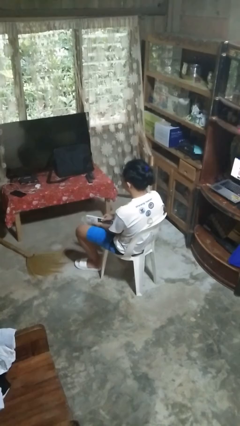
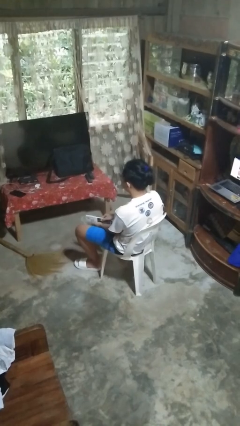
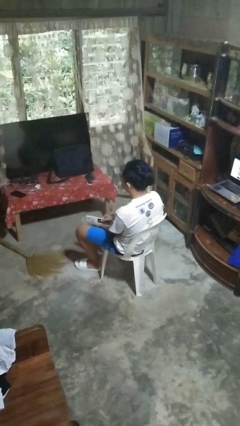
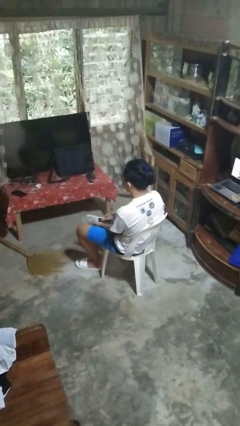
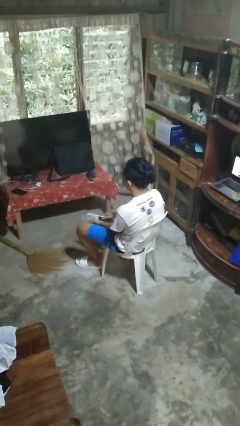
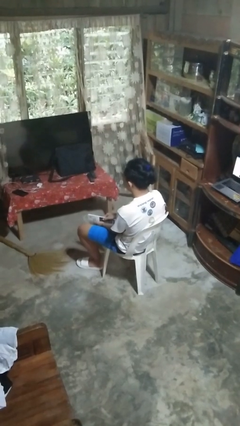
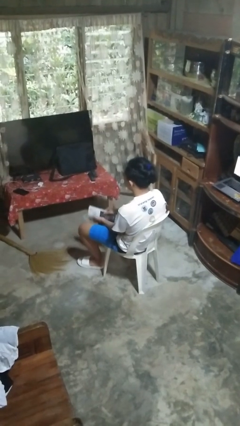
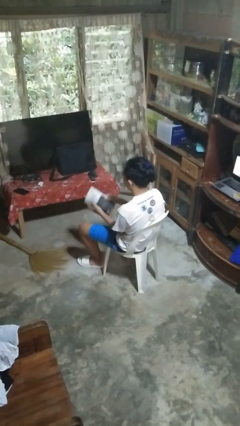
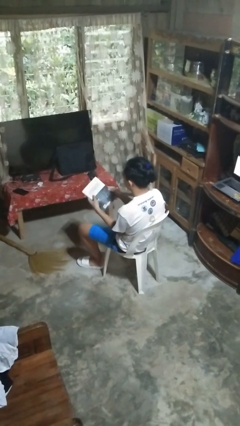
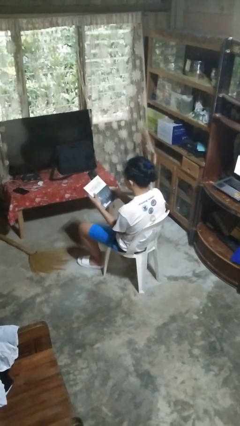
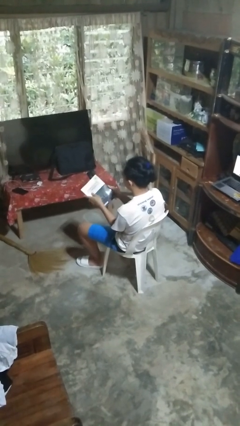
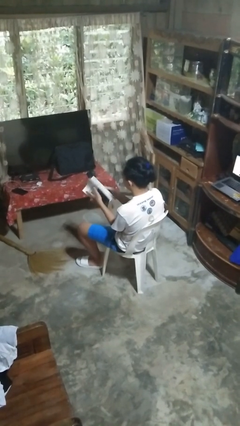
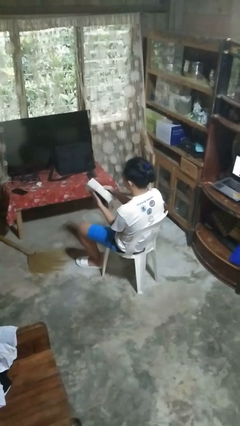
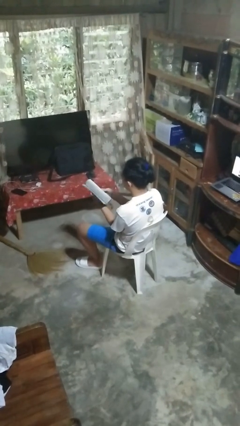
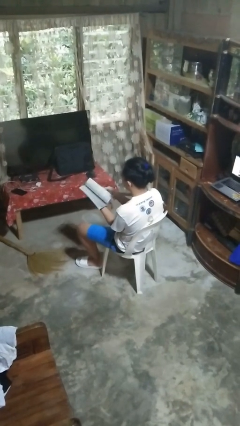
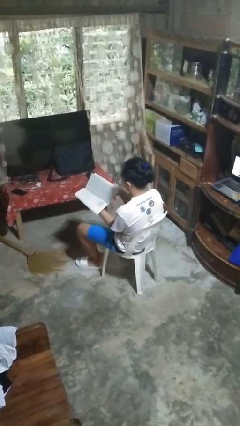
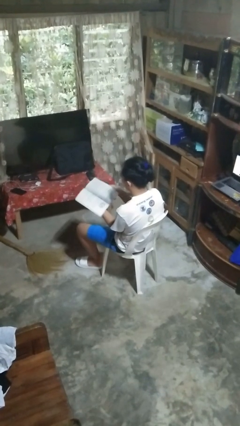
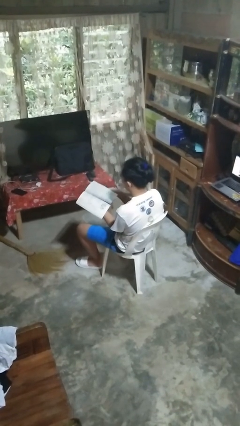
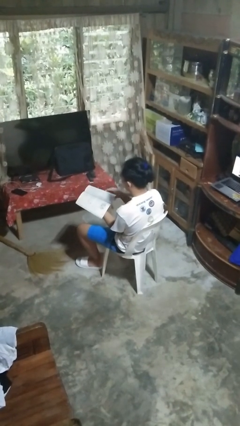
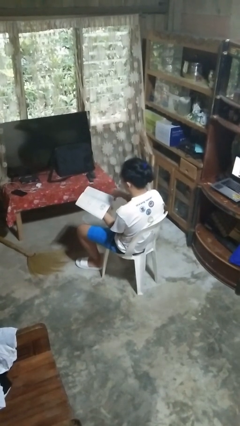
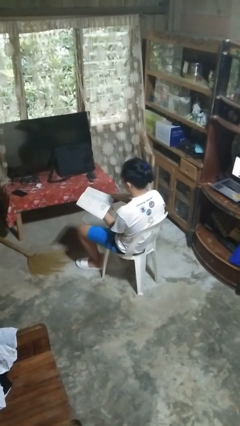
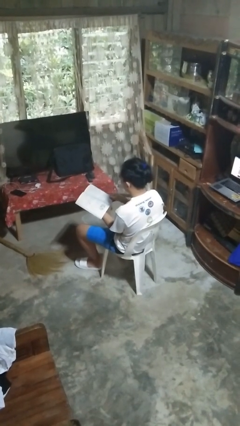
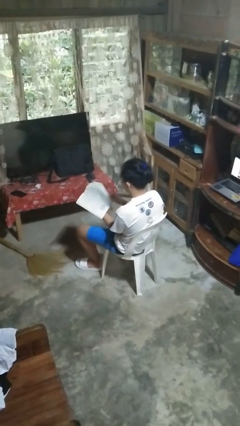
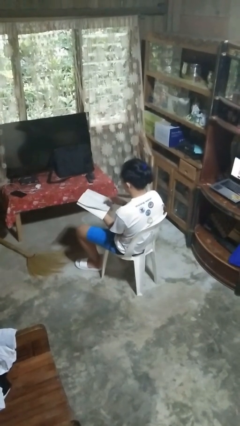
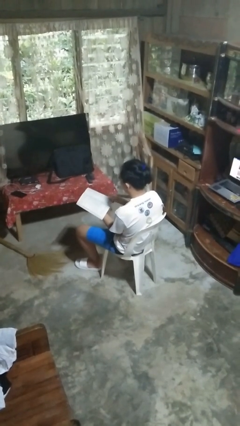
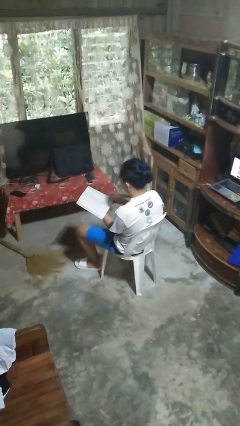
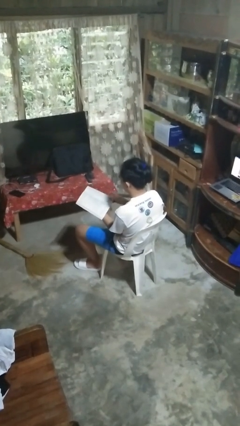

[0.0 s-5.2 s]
person reads book

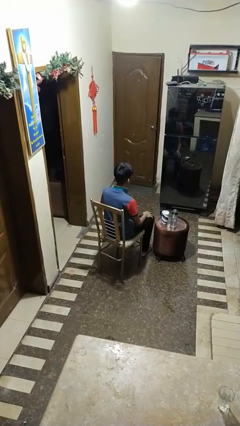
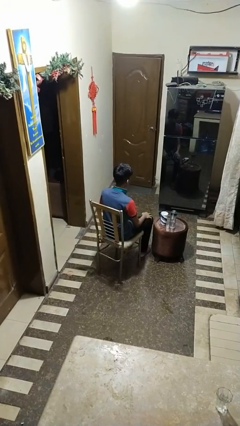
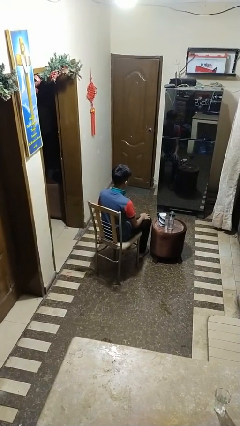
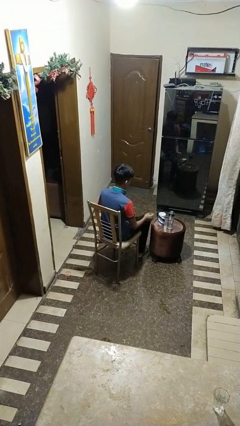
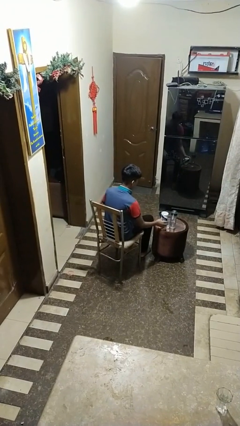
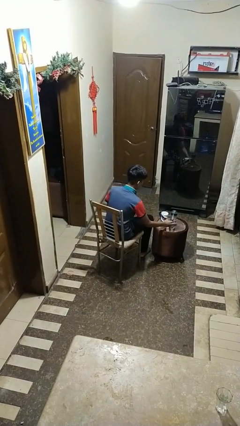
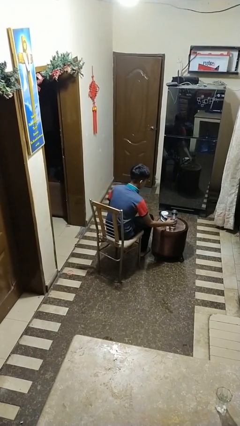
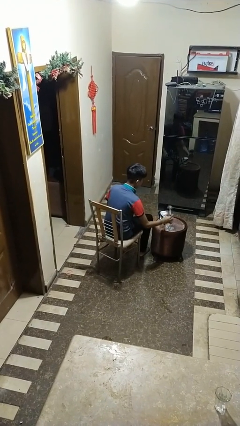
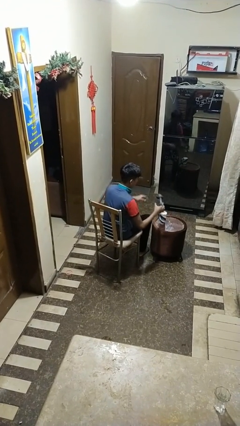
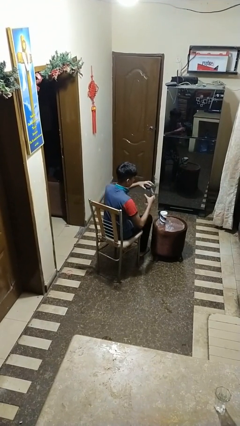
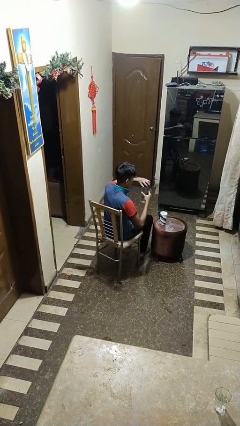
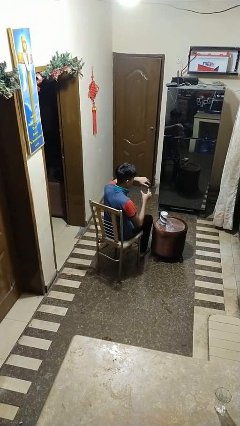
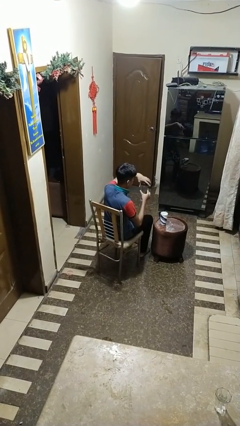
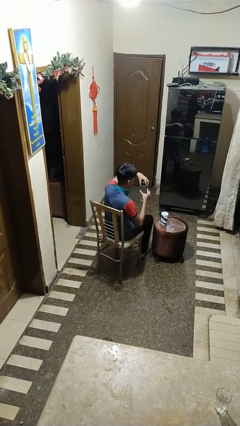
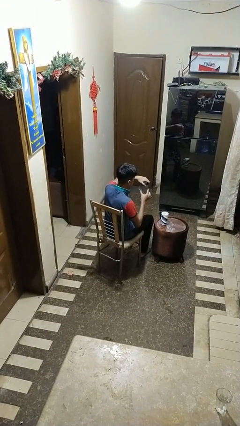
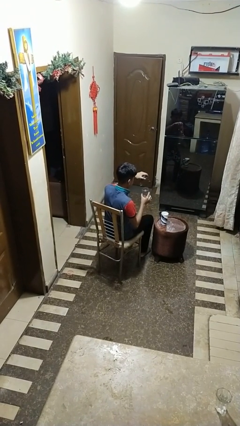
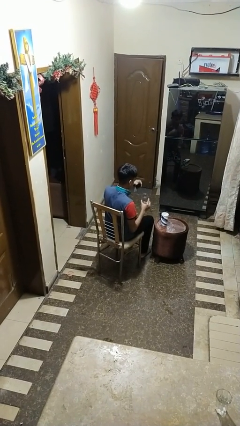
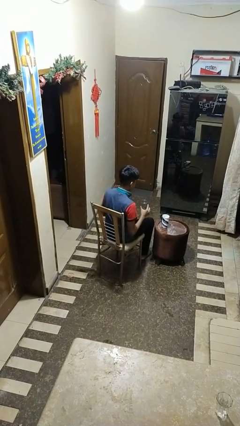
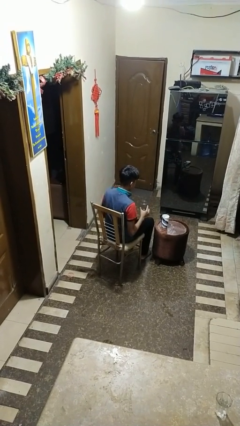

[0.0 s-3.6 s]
person unscrews lid from bottle

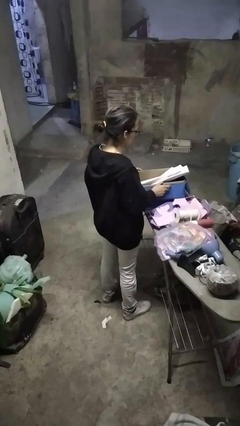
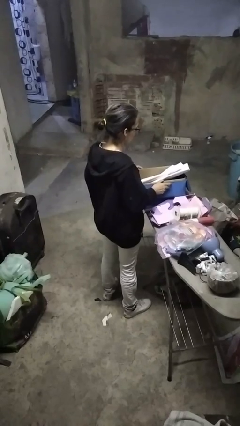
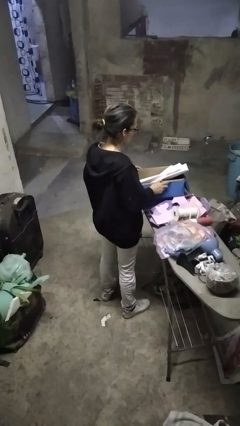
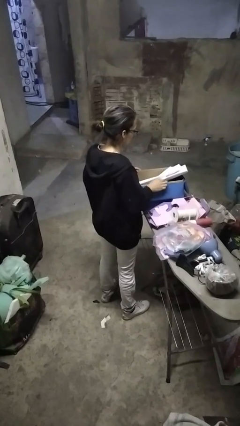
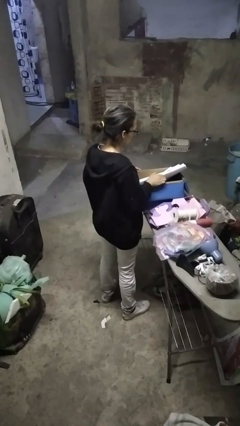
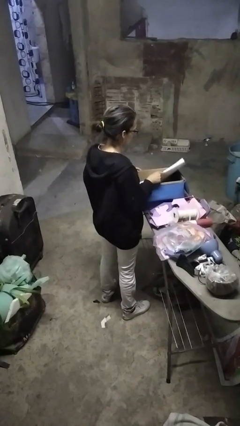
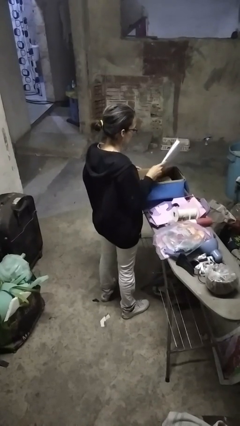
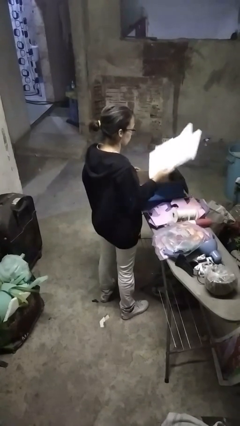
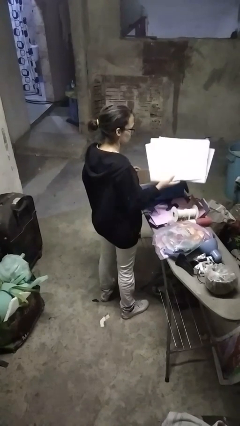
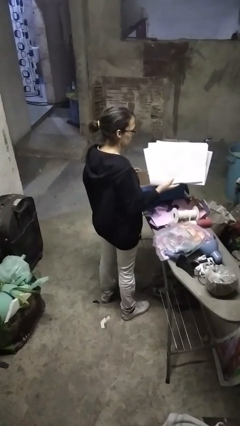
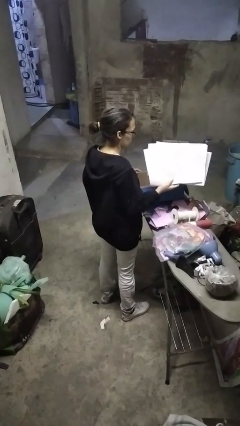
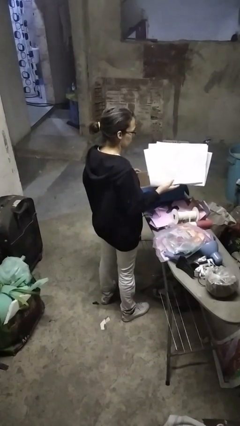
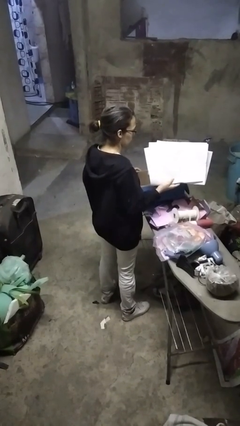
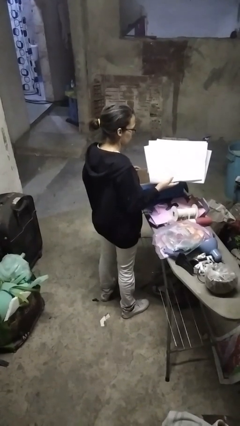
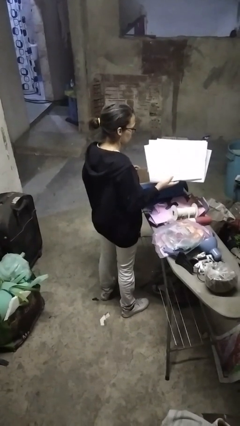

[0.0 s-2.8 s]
person takes object from box

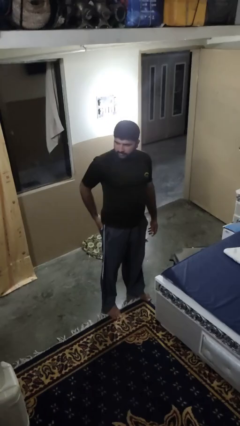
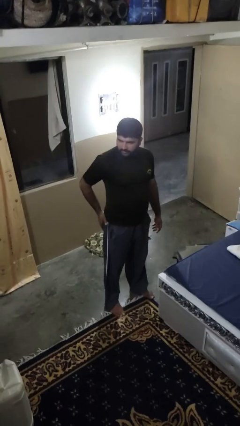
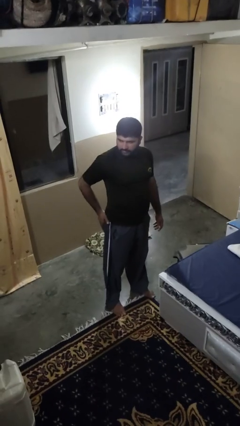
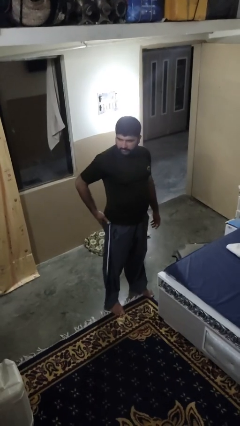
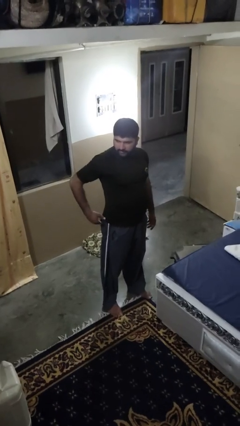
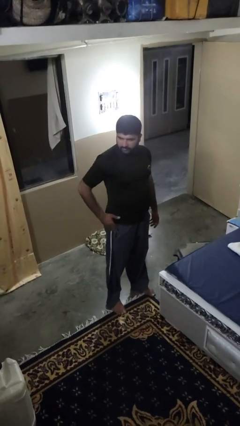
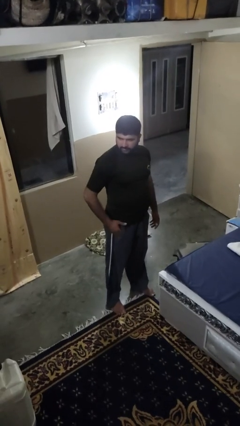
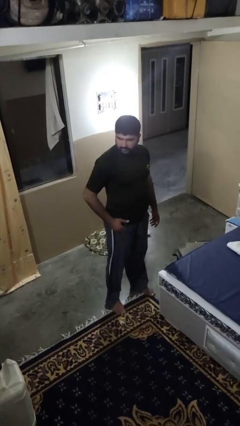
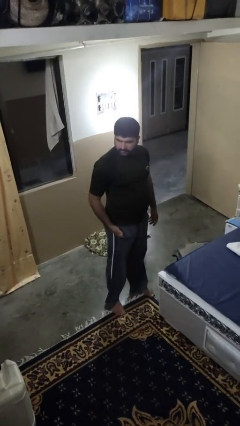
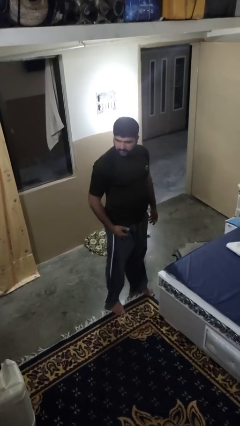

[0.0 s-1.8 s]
person puts hands in back pockets

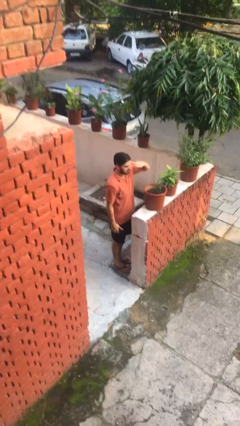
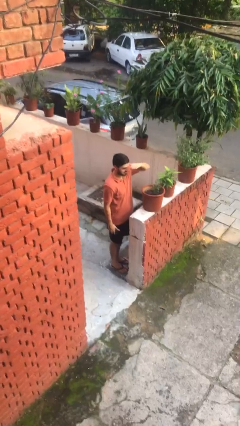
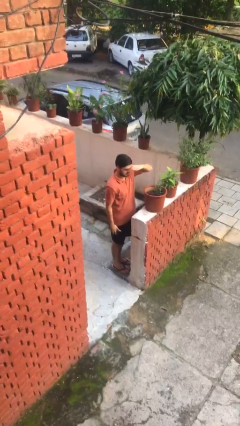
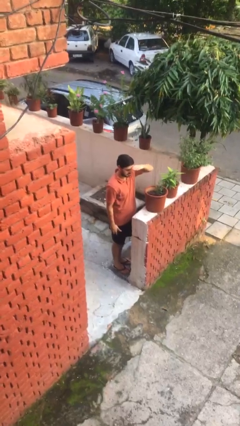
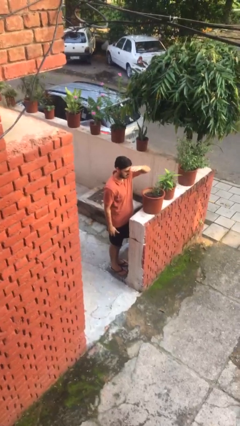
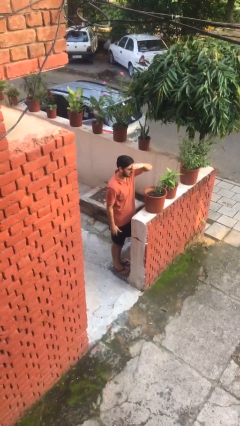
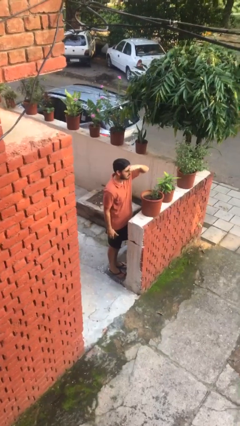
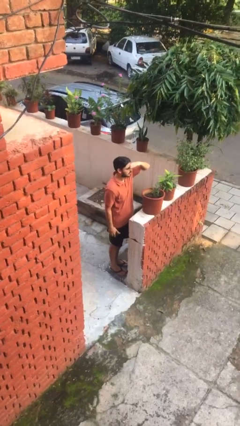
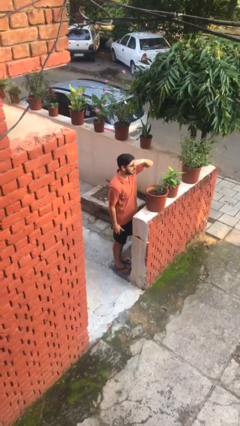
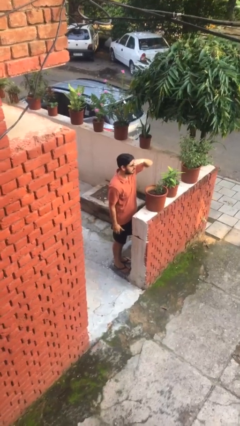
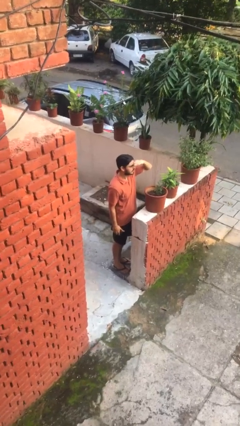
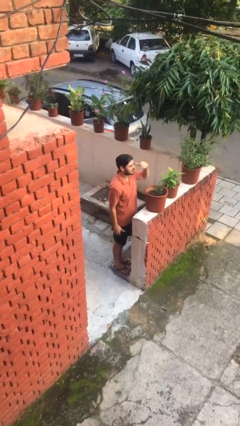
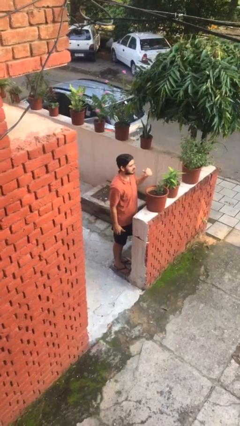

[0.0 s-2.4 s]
person shades eyes

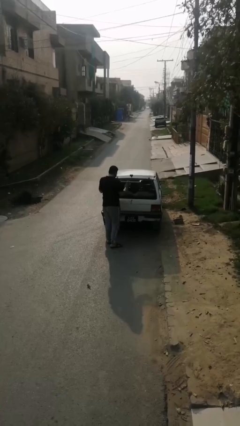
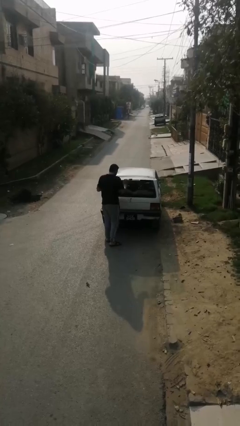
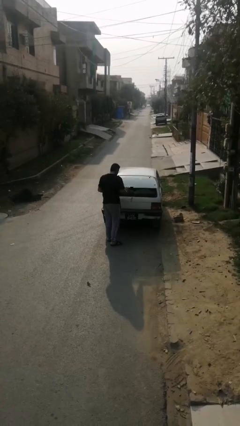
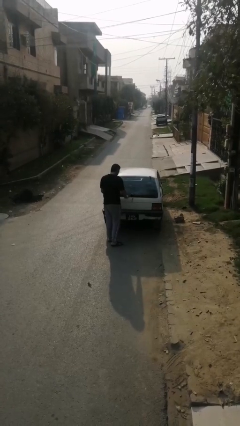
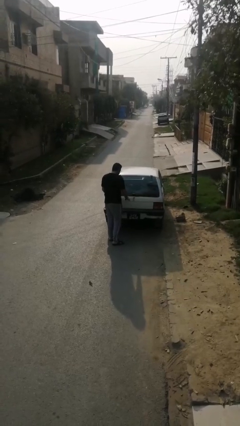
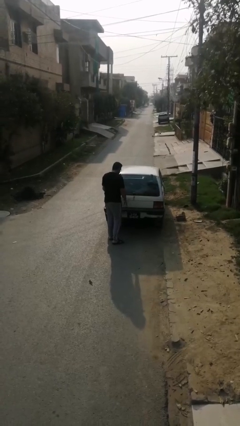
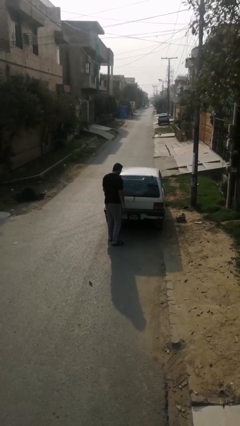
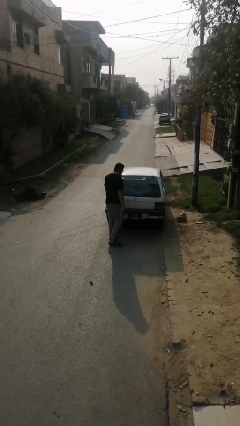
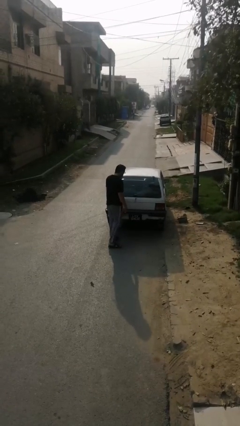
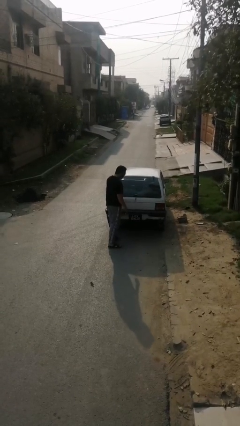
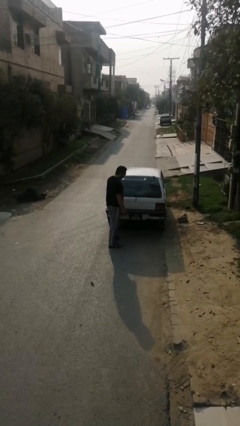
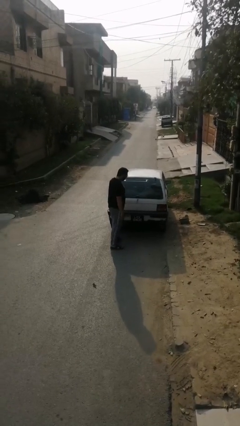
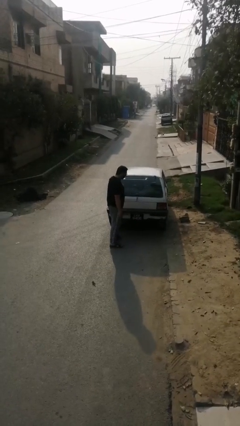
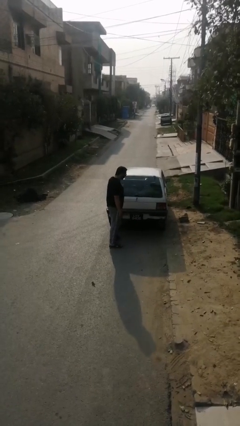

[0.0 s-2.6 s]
person closes car trunk
